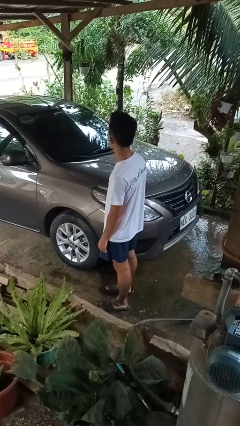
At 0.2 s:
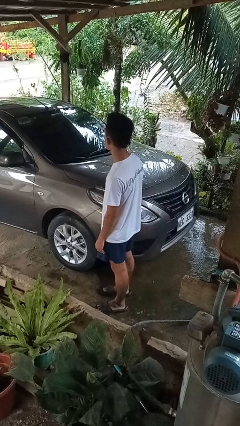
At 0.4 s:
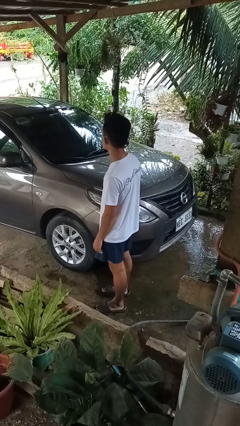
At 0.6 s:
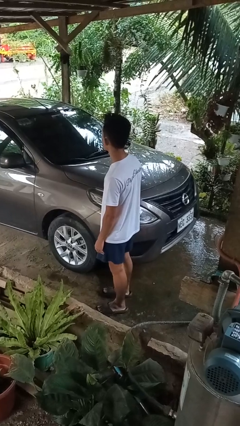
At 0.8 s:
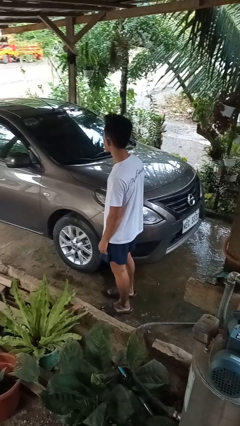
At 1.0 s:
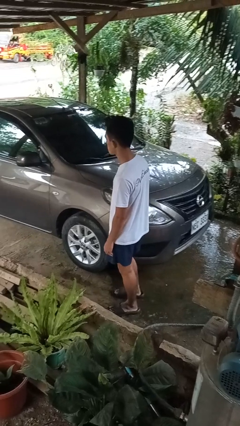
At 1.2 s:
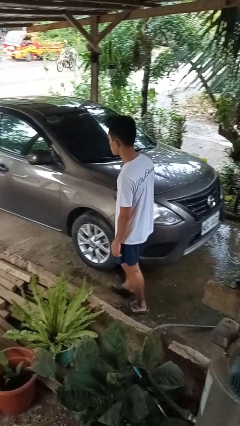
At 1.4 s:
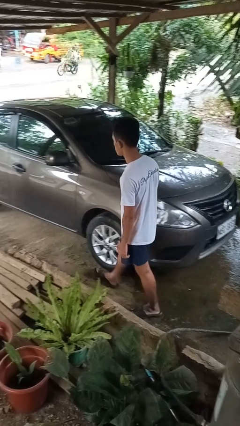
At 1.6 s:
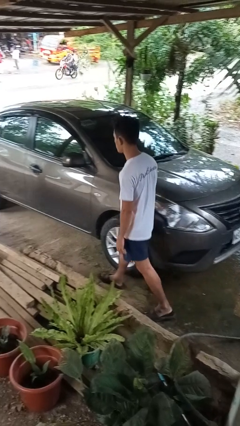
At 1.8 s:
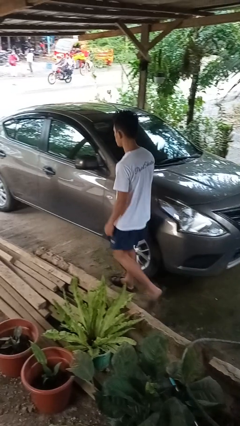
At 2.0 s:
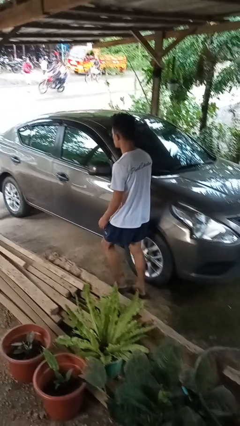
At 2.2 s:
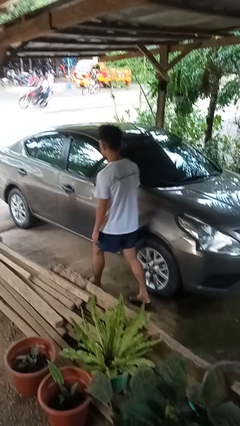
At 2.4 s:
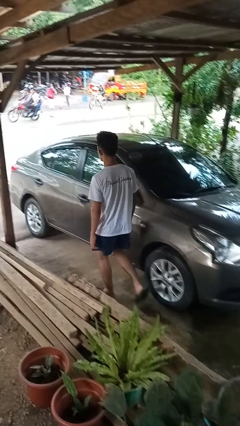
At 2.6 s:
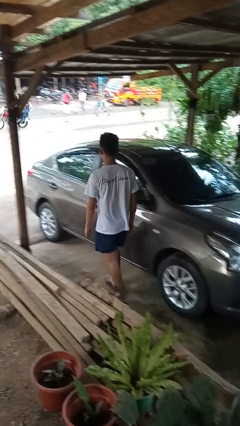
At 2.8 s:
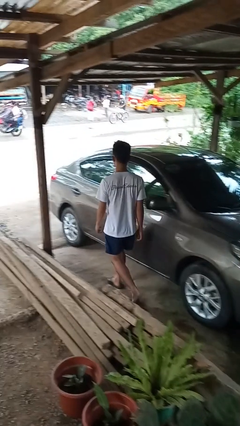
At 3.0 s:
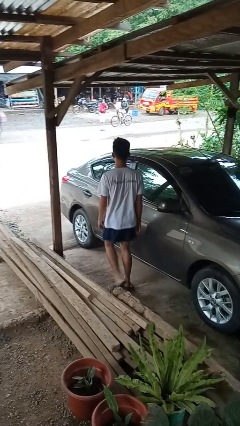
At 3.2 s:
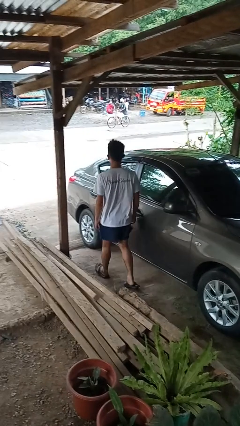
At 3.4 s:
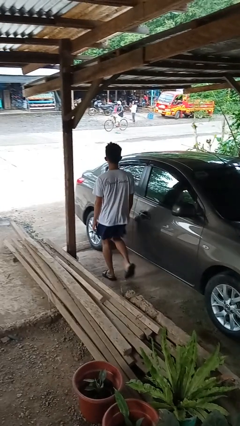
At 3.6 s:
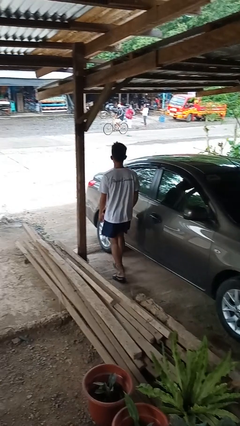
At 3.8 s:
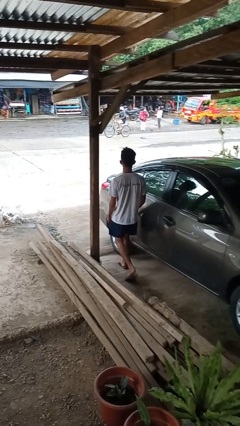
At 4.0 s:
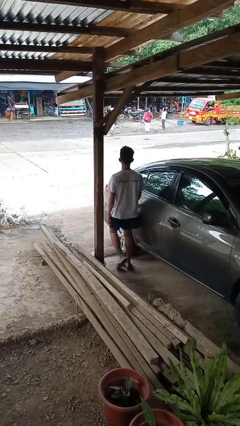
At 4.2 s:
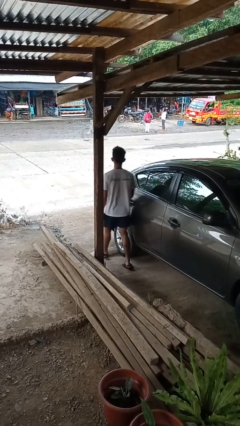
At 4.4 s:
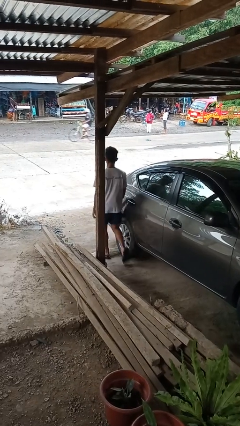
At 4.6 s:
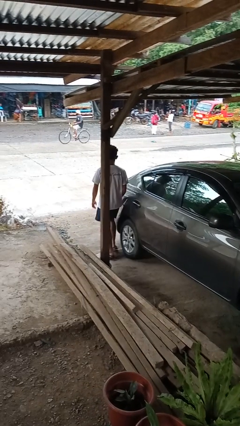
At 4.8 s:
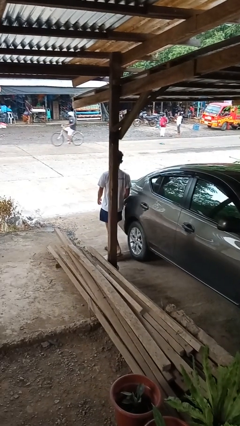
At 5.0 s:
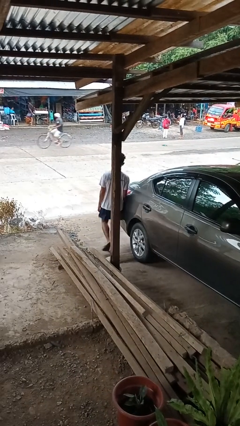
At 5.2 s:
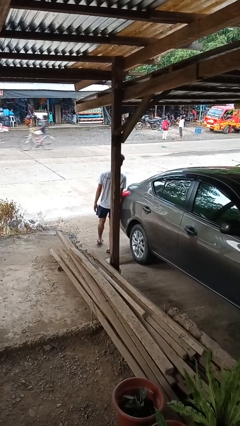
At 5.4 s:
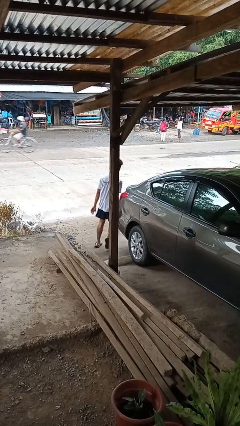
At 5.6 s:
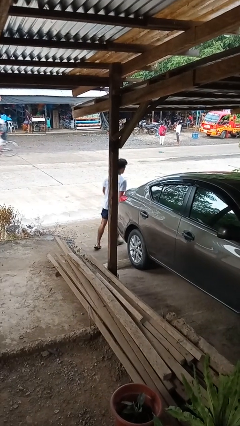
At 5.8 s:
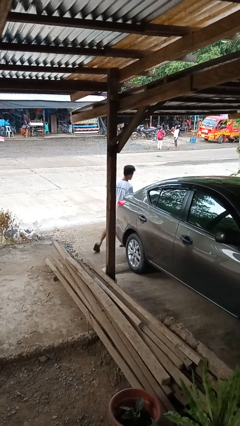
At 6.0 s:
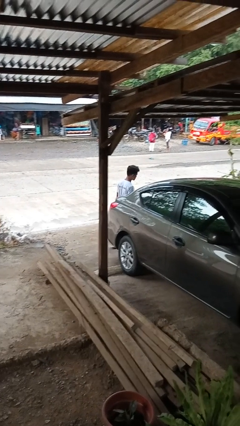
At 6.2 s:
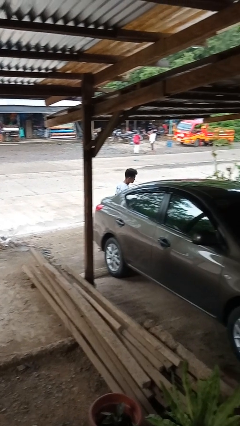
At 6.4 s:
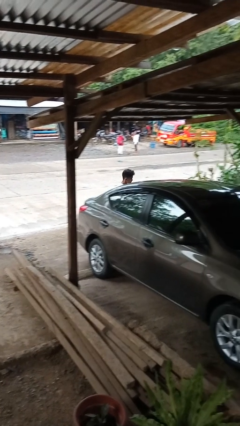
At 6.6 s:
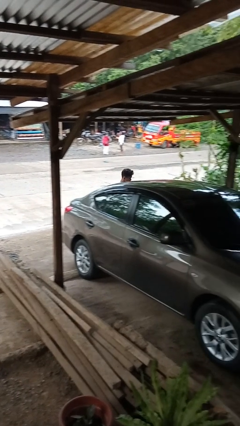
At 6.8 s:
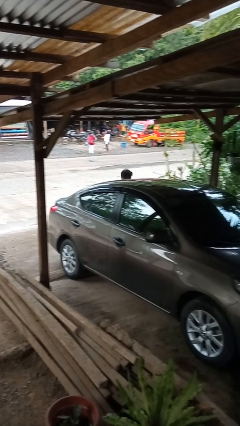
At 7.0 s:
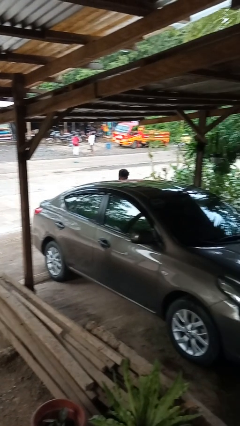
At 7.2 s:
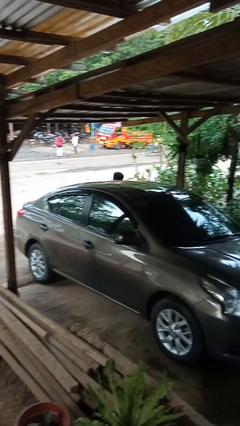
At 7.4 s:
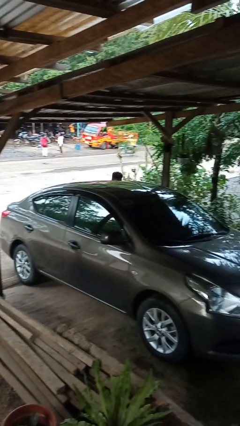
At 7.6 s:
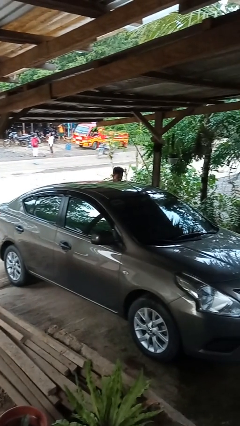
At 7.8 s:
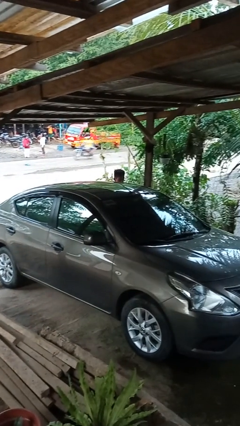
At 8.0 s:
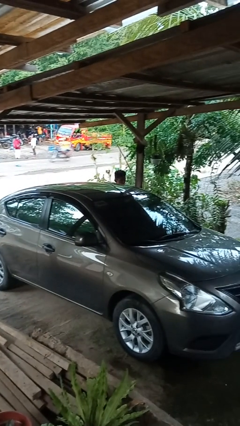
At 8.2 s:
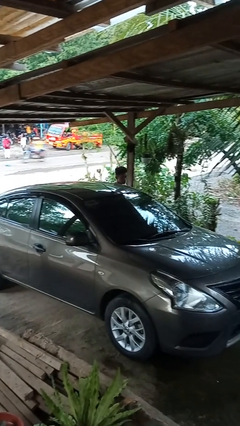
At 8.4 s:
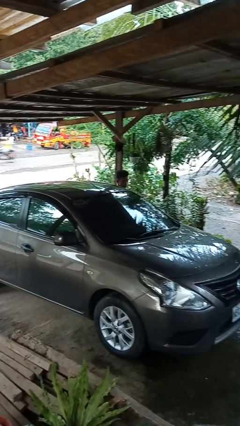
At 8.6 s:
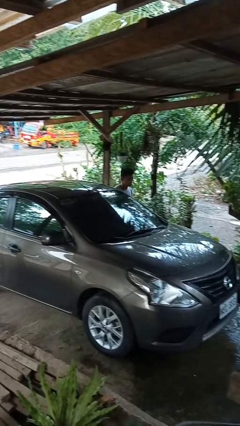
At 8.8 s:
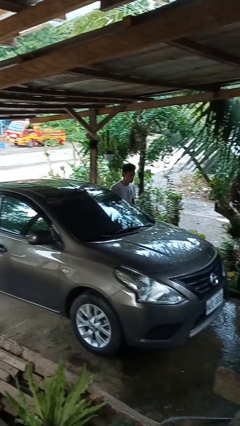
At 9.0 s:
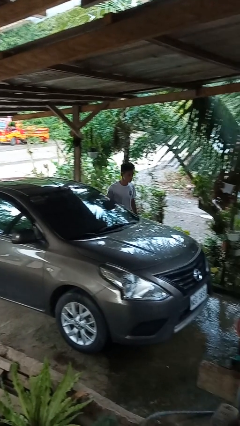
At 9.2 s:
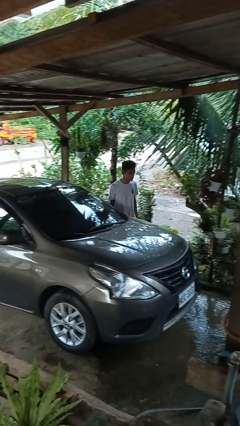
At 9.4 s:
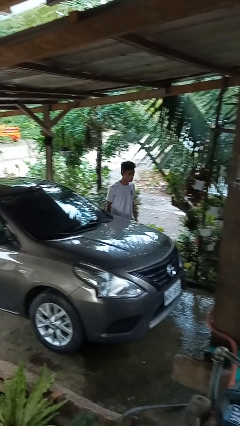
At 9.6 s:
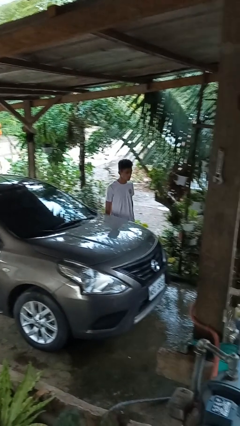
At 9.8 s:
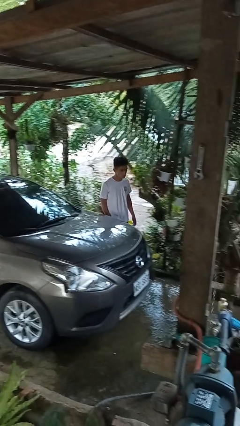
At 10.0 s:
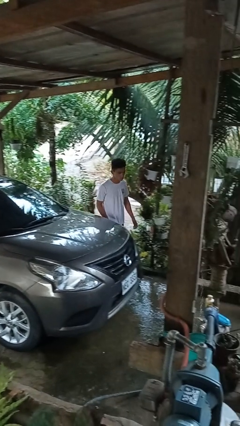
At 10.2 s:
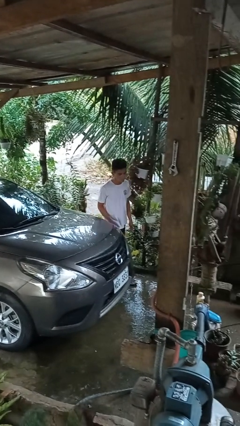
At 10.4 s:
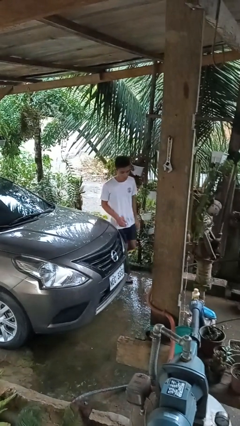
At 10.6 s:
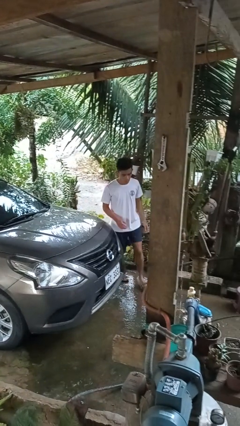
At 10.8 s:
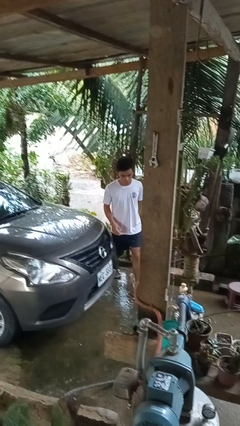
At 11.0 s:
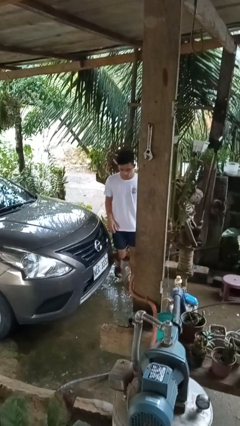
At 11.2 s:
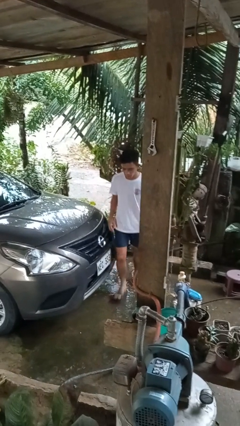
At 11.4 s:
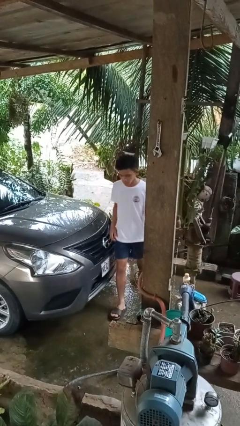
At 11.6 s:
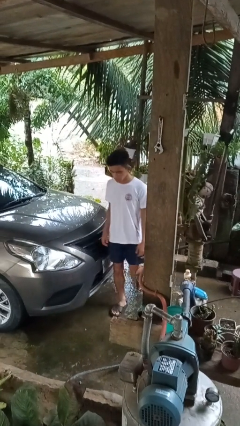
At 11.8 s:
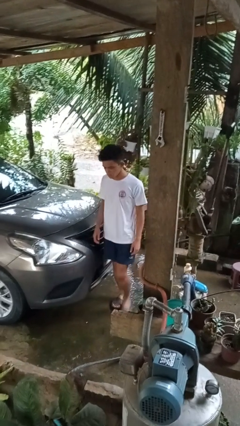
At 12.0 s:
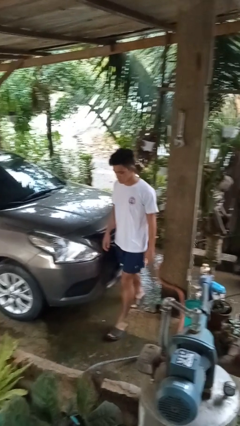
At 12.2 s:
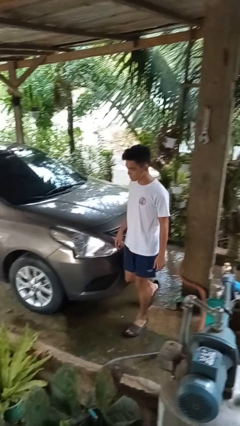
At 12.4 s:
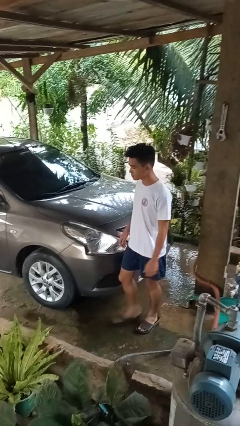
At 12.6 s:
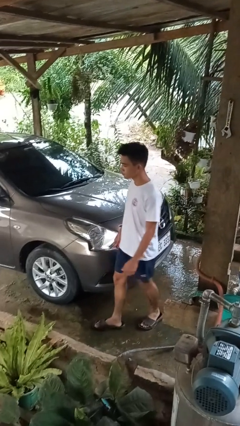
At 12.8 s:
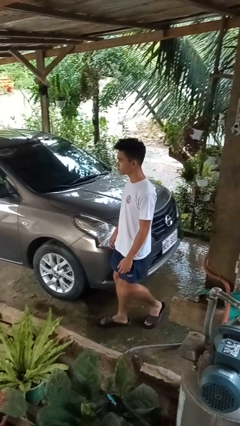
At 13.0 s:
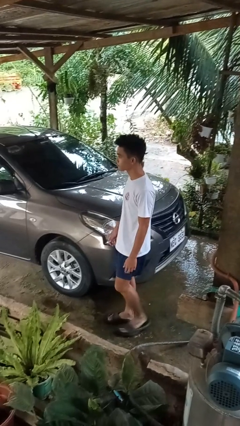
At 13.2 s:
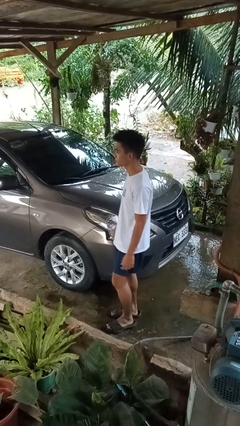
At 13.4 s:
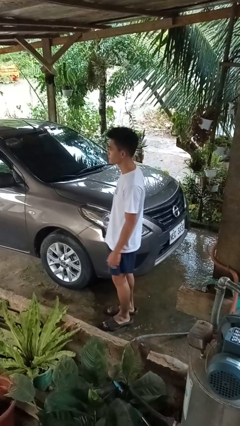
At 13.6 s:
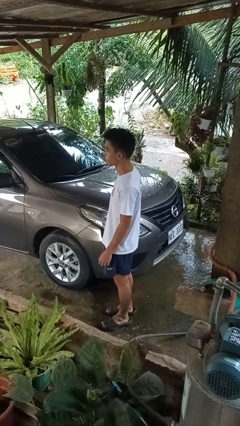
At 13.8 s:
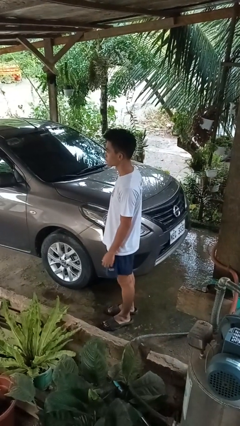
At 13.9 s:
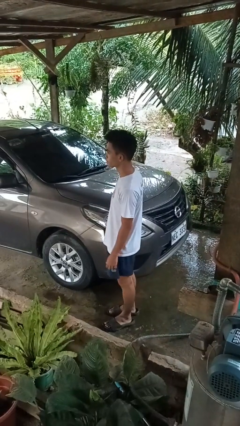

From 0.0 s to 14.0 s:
person walks around car

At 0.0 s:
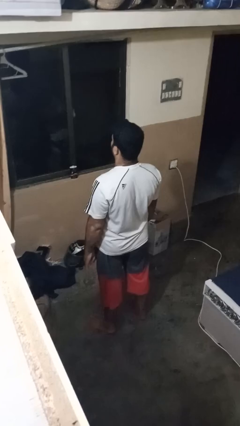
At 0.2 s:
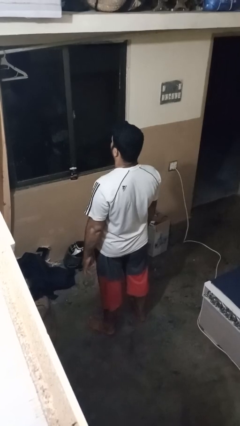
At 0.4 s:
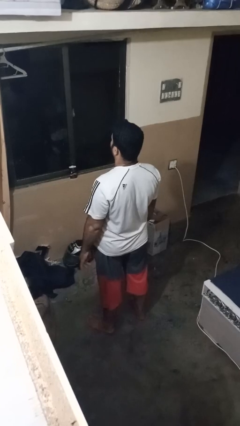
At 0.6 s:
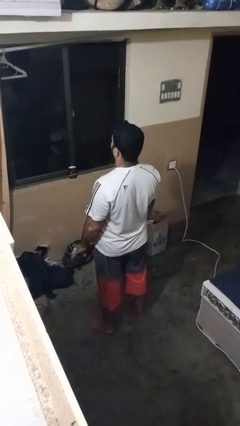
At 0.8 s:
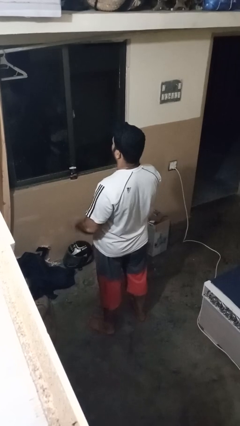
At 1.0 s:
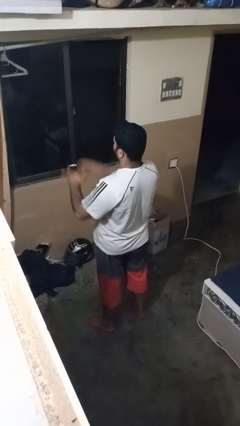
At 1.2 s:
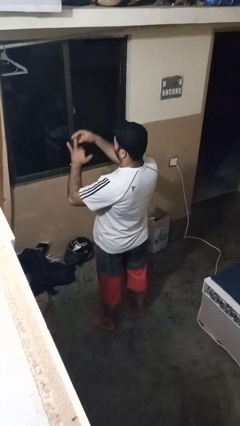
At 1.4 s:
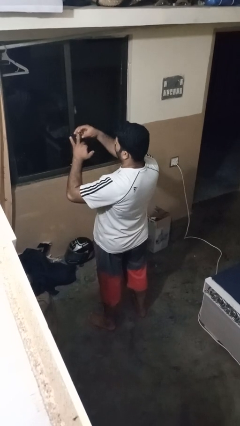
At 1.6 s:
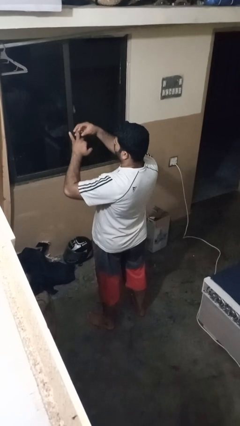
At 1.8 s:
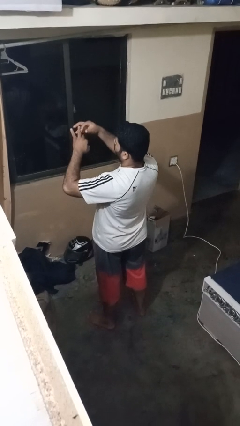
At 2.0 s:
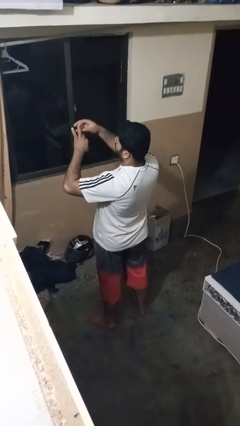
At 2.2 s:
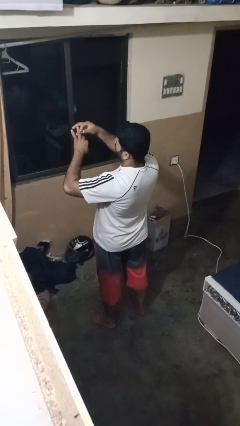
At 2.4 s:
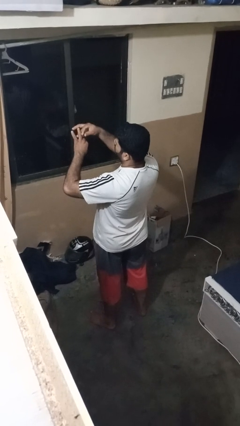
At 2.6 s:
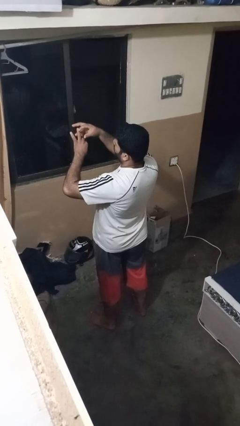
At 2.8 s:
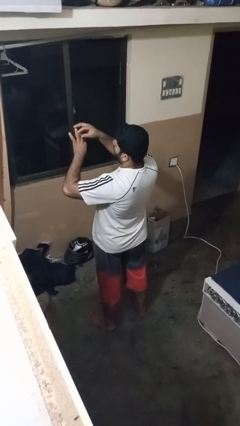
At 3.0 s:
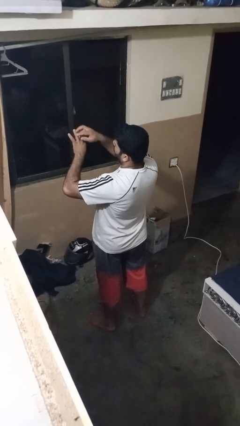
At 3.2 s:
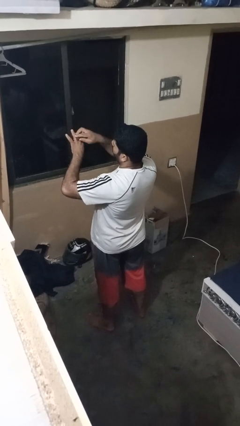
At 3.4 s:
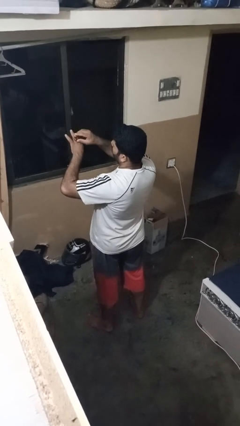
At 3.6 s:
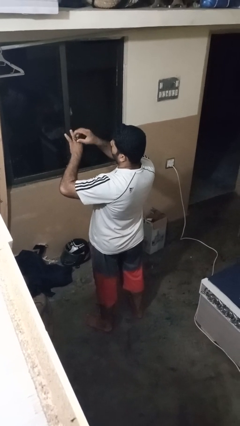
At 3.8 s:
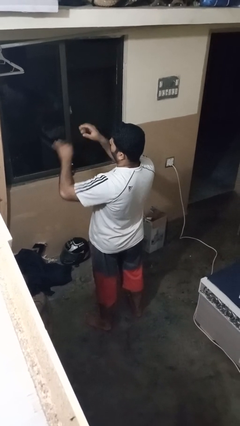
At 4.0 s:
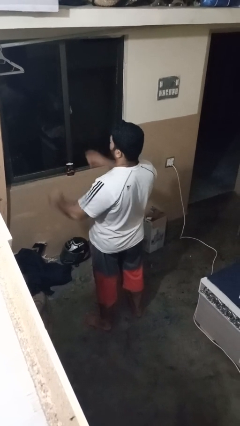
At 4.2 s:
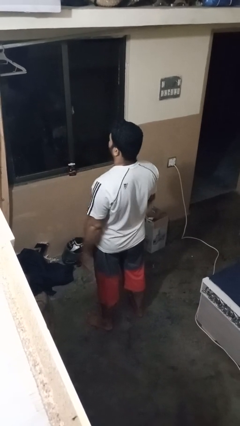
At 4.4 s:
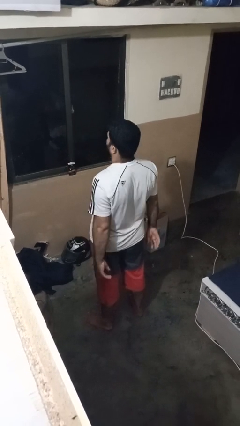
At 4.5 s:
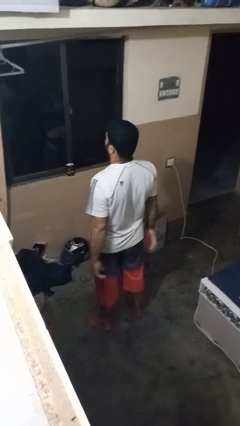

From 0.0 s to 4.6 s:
person puts on ring
